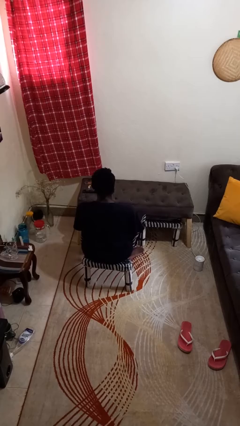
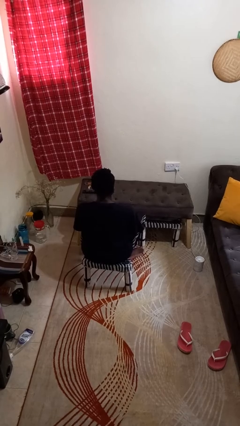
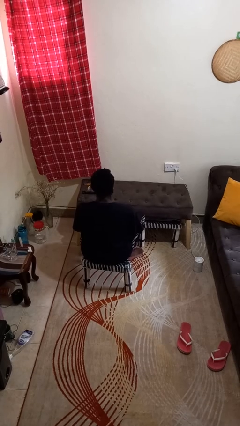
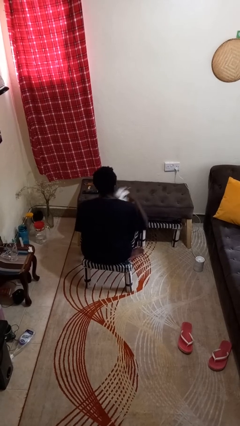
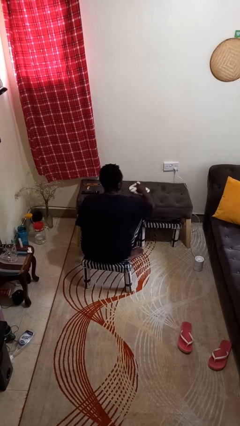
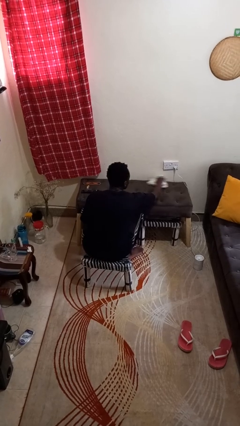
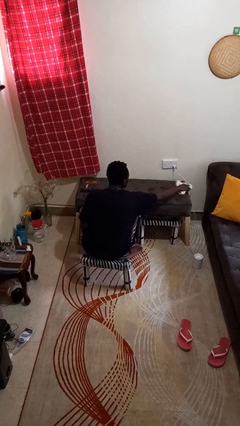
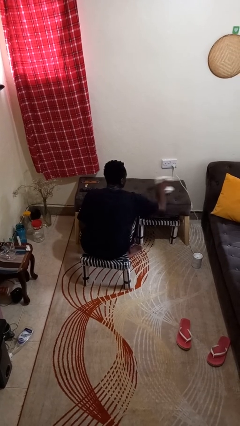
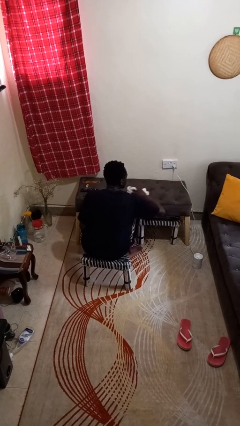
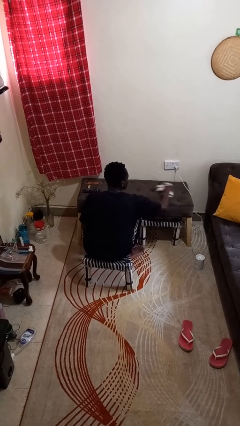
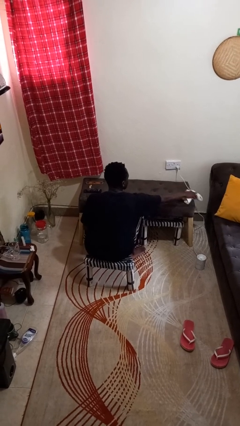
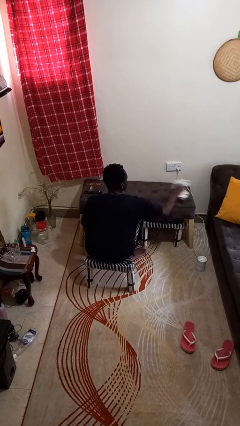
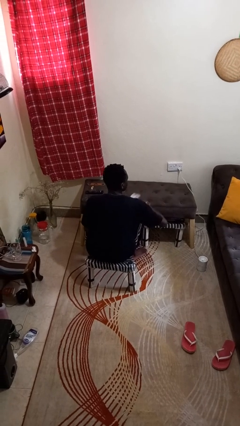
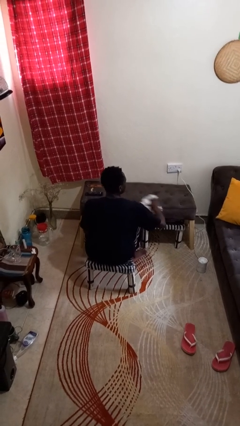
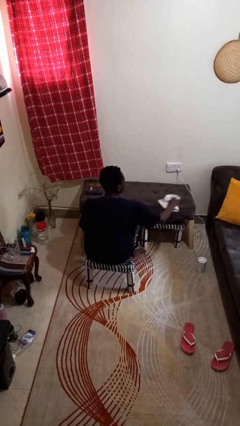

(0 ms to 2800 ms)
person cleans table with rag

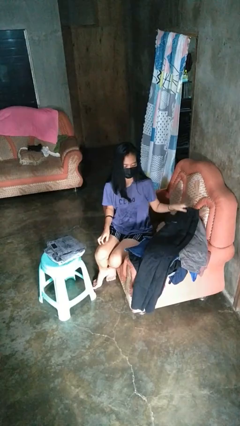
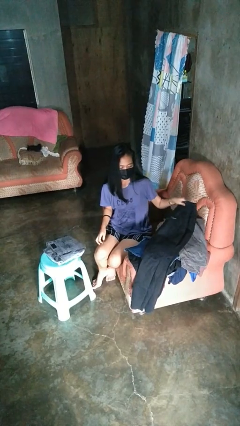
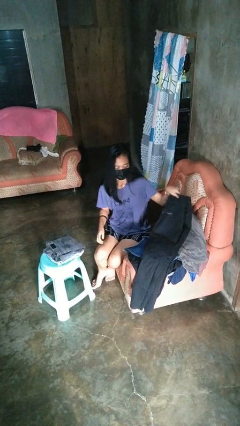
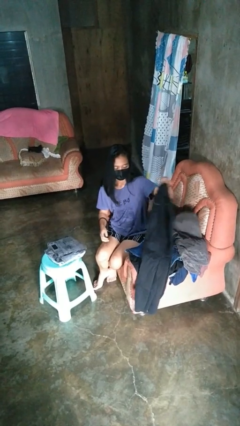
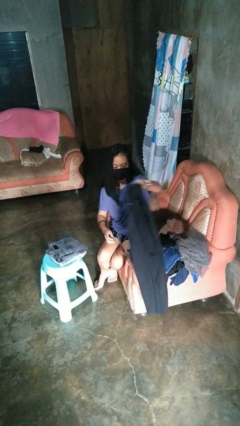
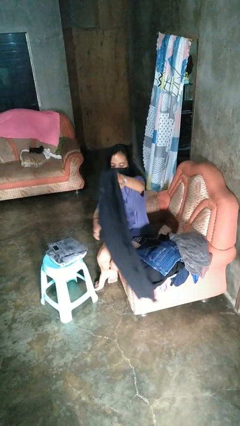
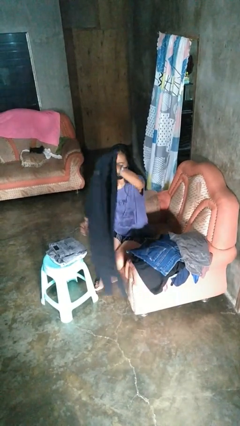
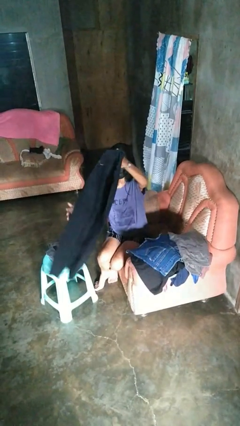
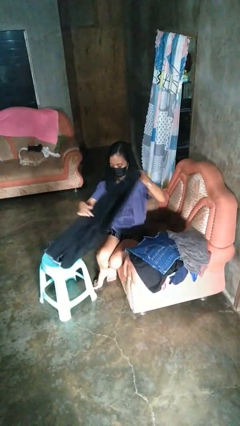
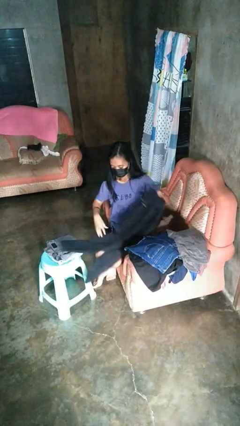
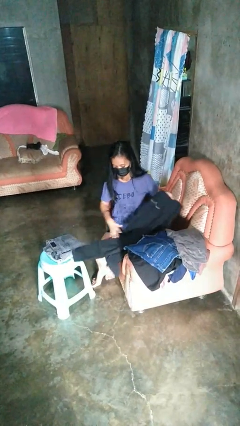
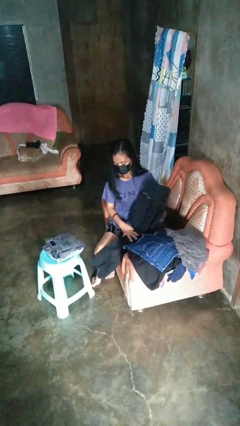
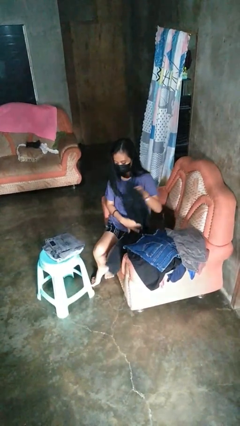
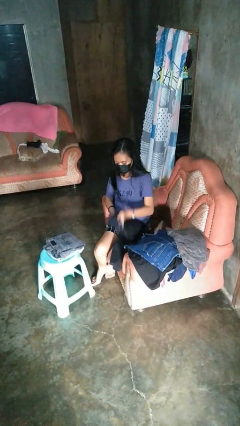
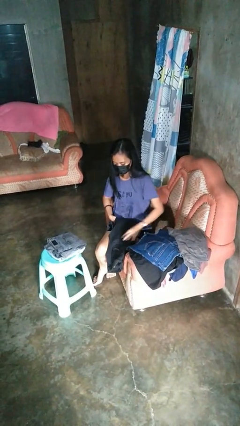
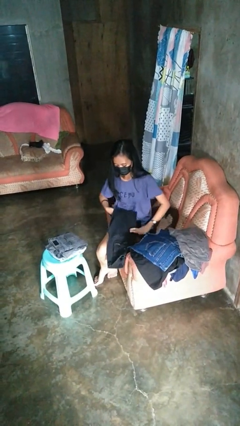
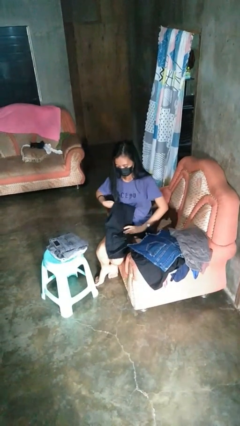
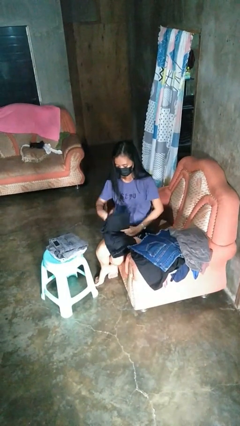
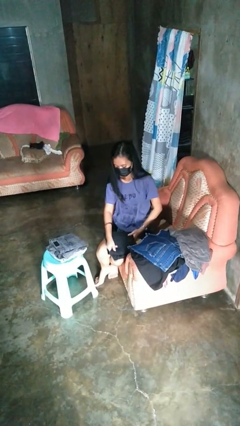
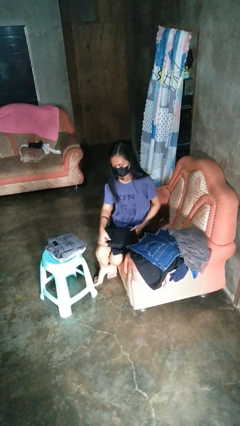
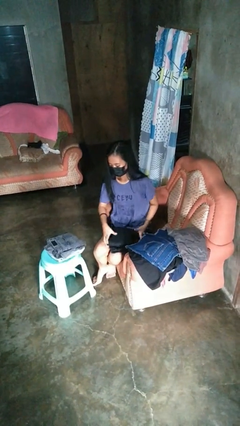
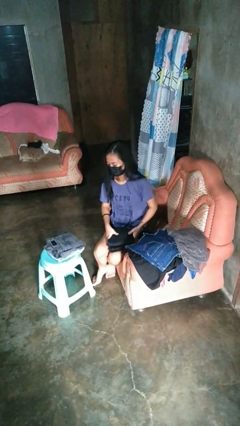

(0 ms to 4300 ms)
person folds pants

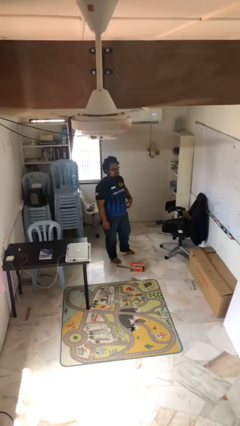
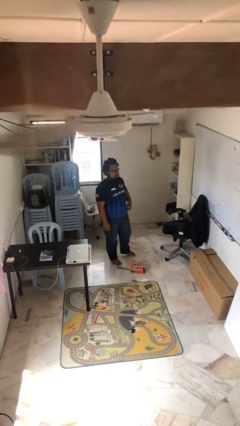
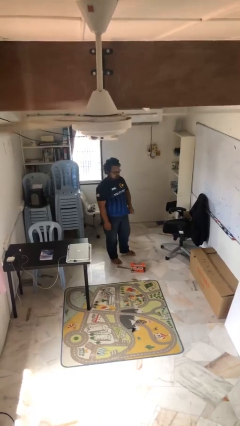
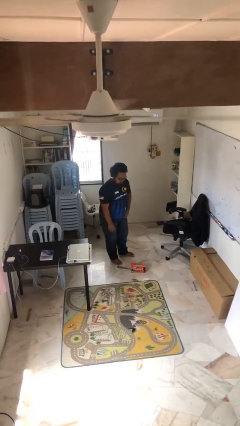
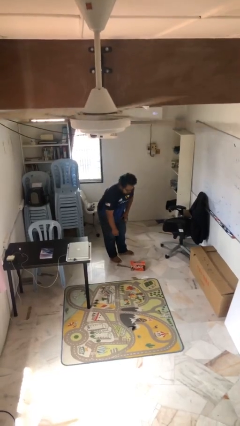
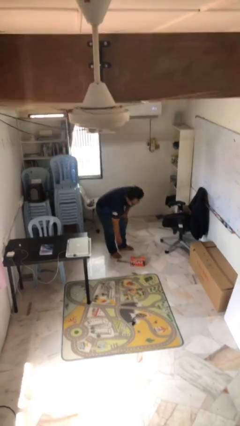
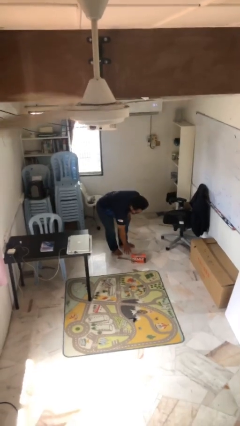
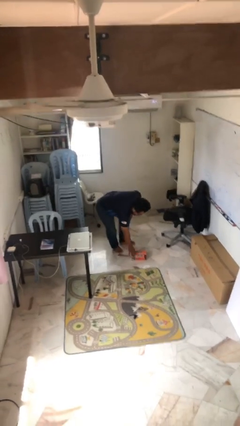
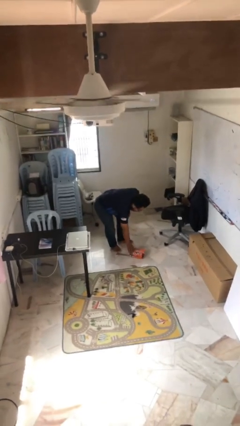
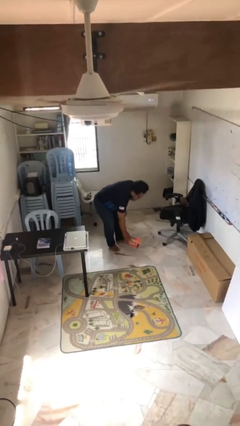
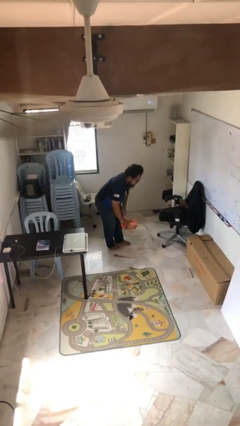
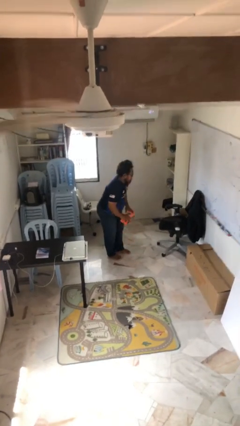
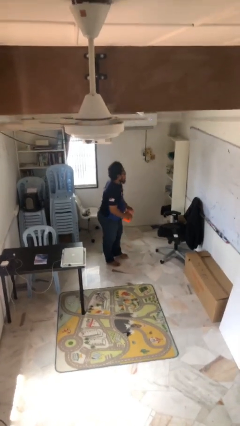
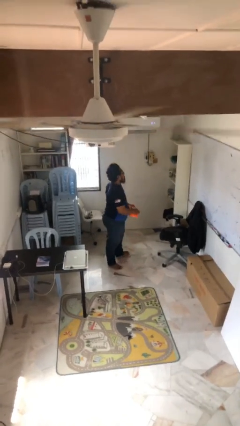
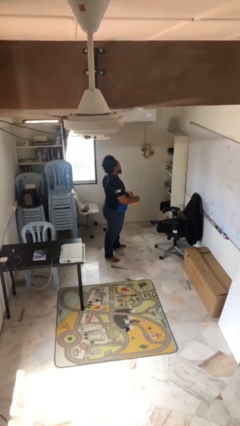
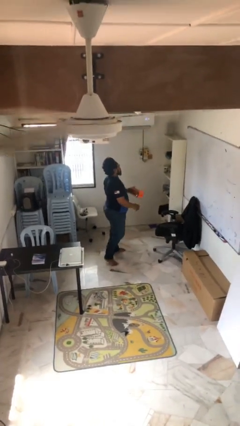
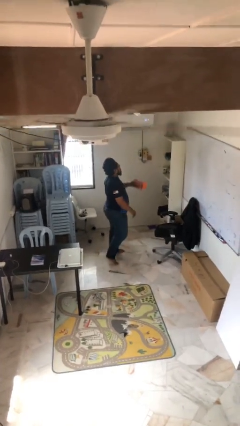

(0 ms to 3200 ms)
person picks up object from floor

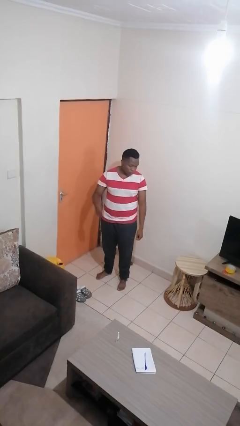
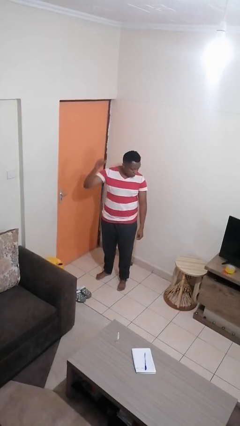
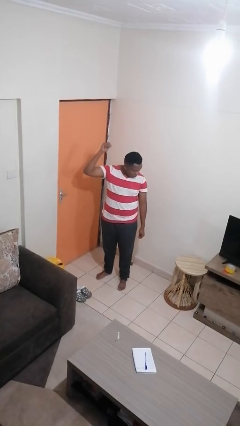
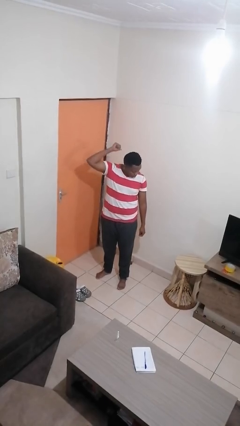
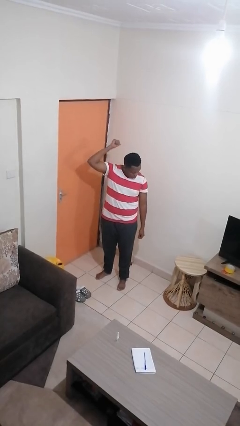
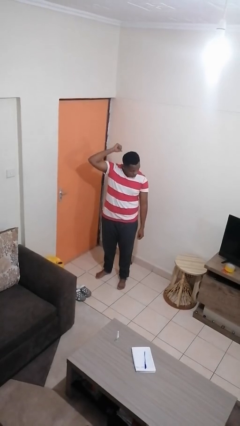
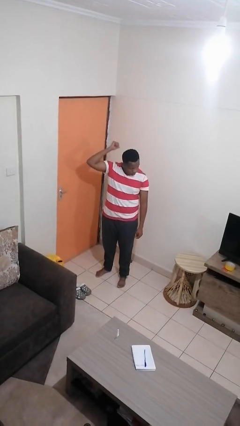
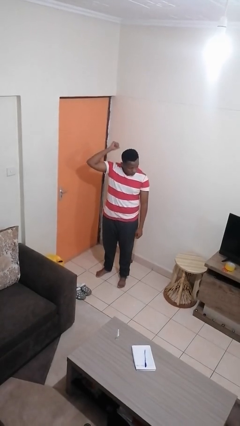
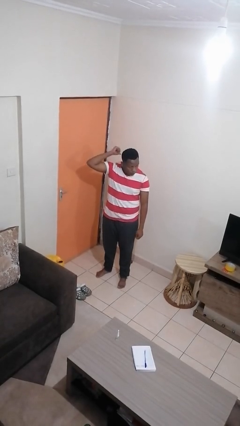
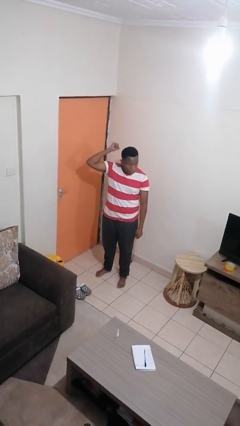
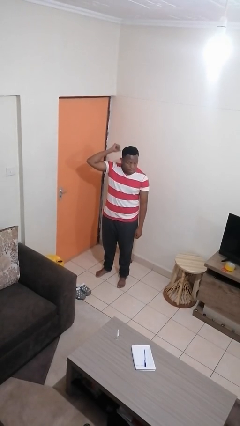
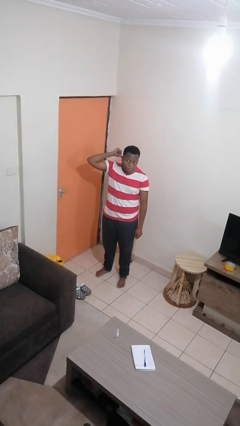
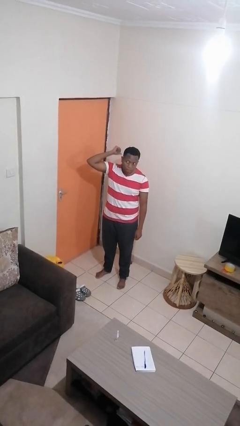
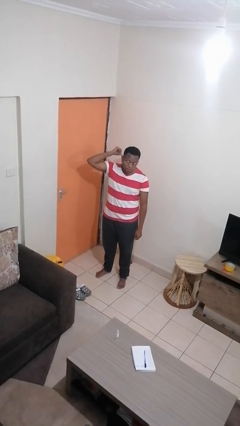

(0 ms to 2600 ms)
person gestures behind me

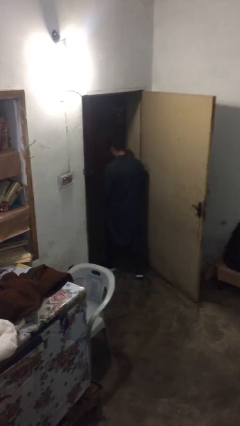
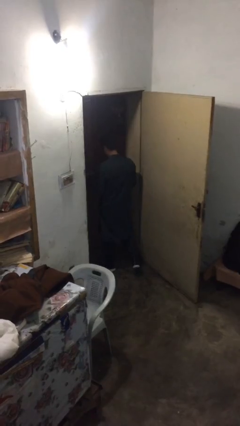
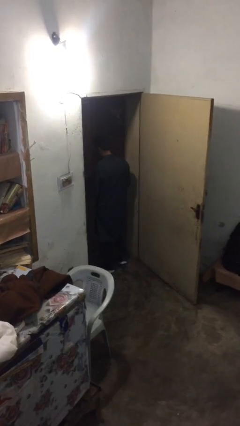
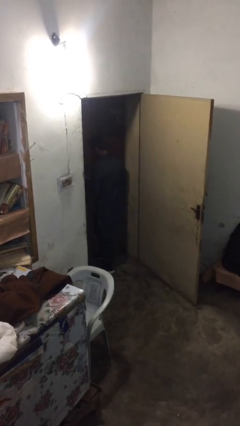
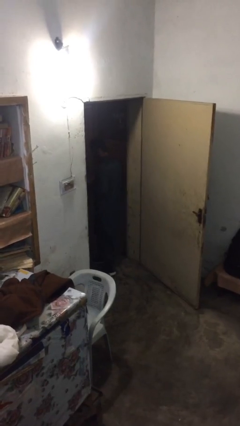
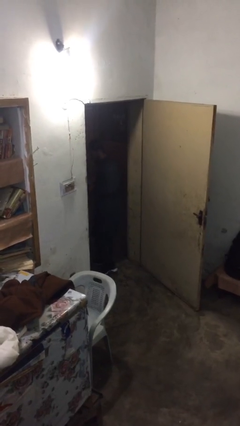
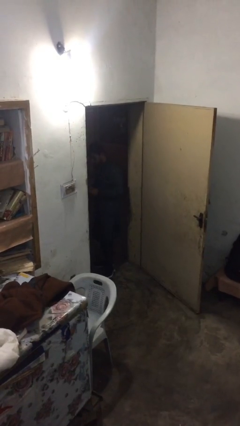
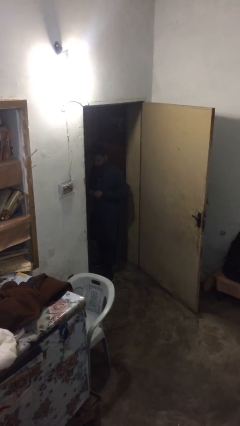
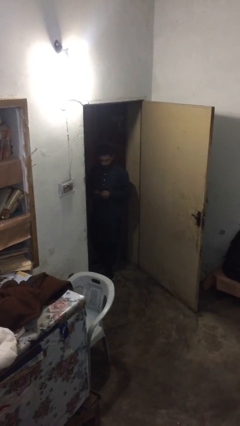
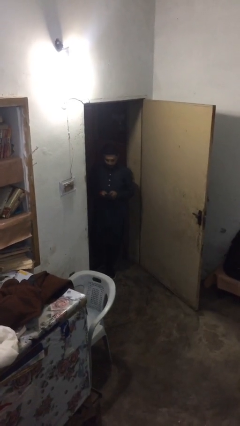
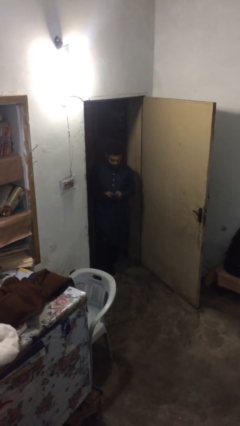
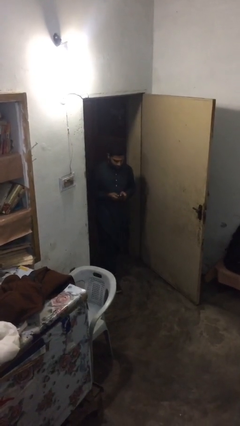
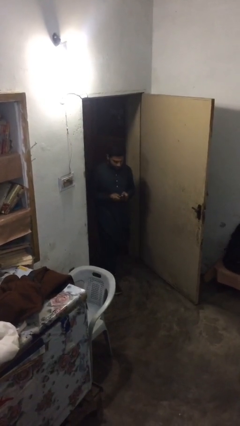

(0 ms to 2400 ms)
person enters scene through structure

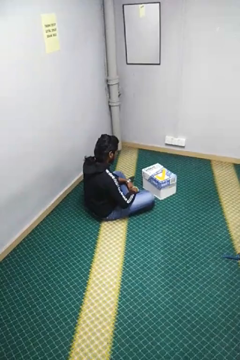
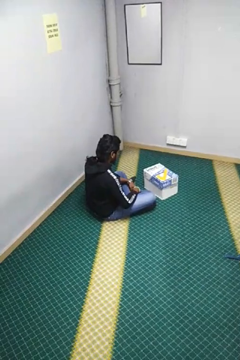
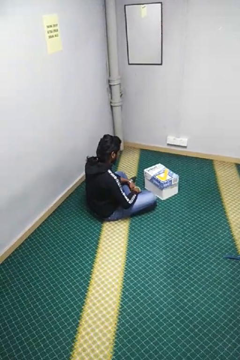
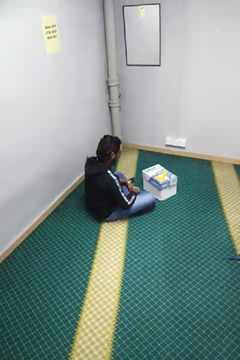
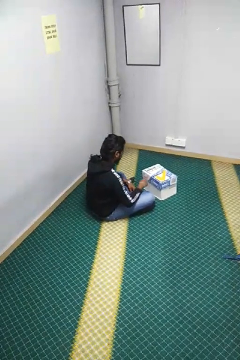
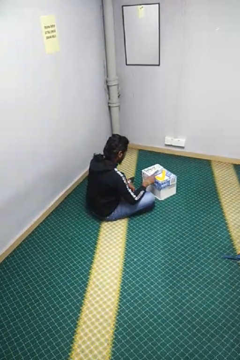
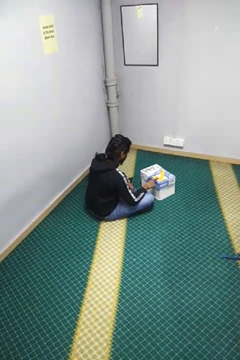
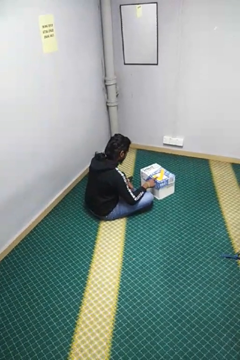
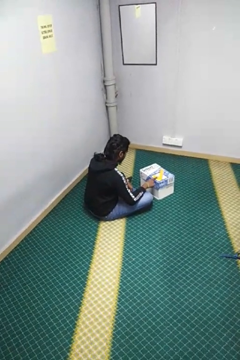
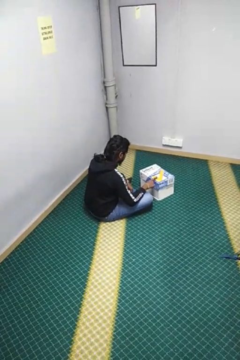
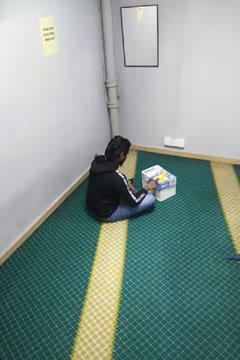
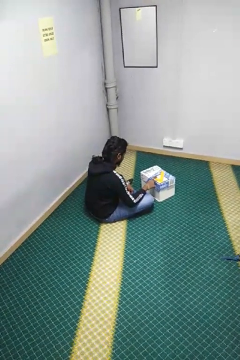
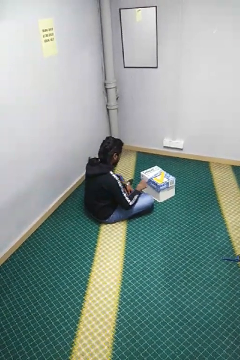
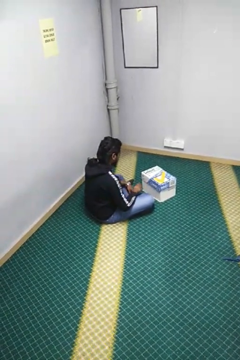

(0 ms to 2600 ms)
person taps object with finger
